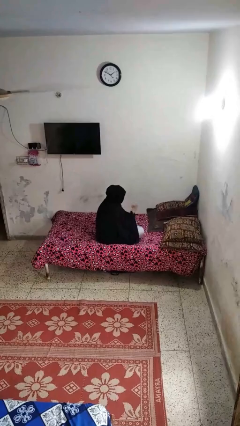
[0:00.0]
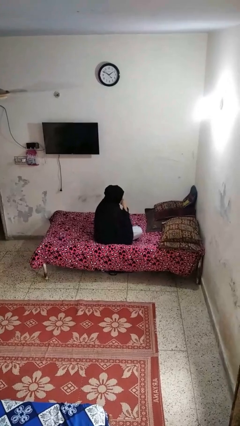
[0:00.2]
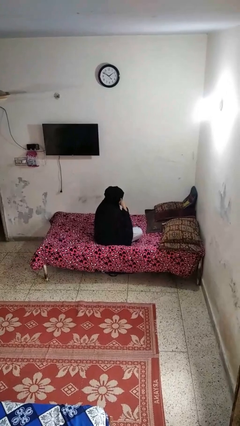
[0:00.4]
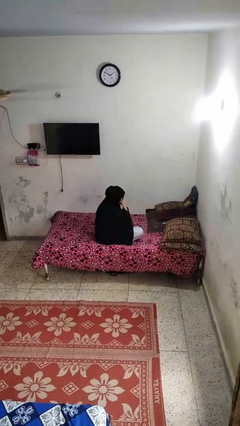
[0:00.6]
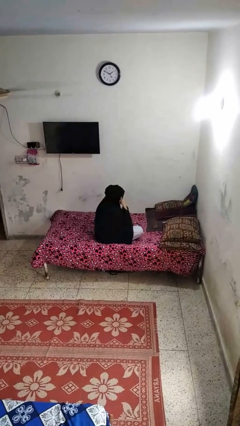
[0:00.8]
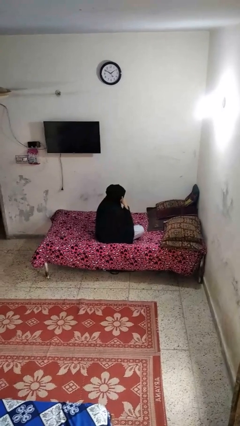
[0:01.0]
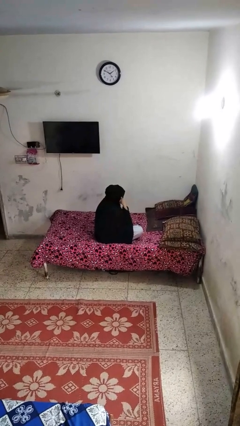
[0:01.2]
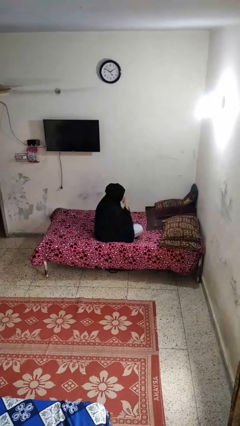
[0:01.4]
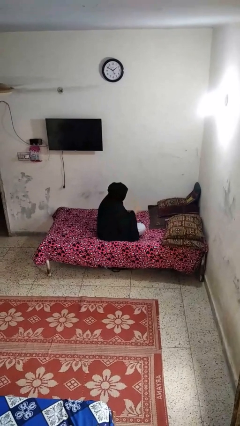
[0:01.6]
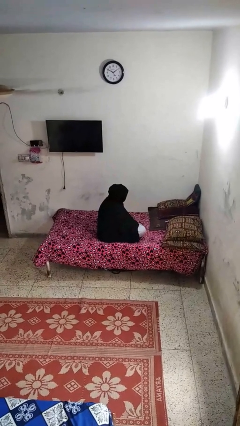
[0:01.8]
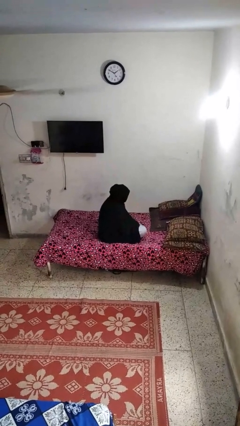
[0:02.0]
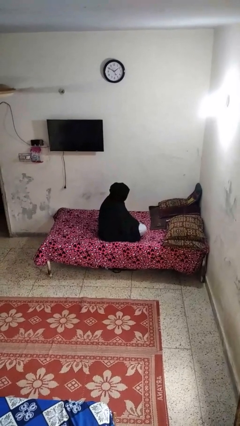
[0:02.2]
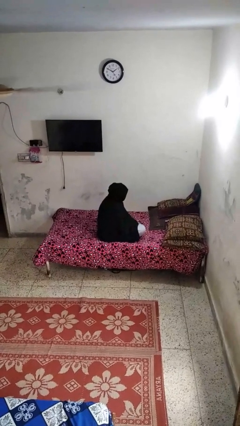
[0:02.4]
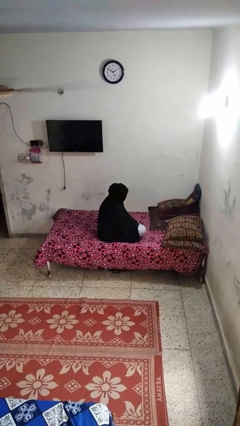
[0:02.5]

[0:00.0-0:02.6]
person gestures call me

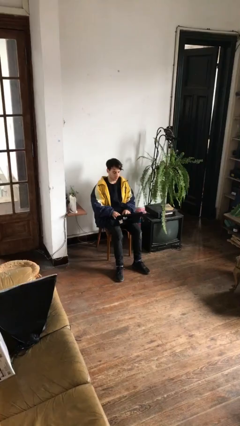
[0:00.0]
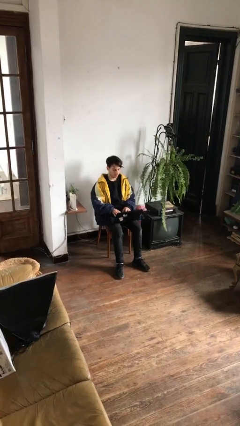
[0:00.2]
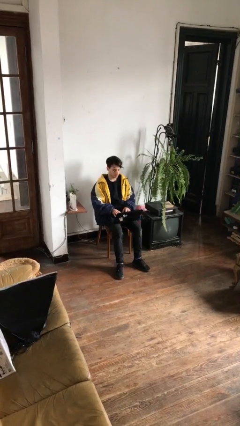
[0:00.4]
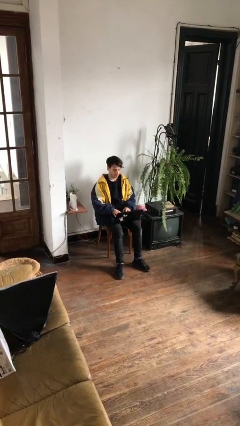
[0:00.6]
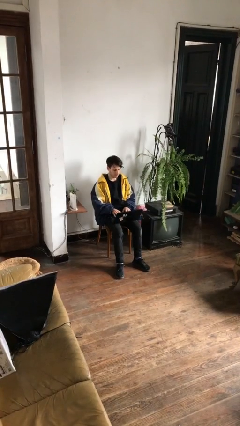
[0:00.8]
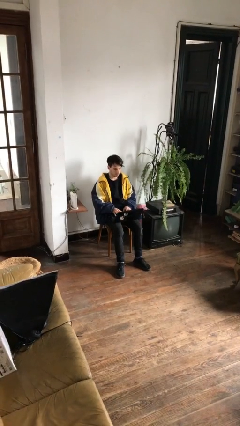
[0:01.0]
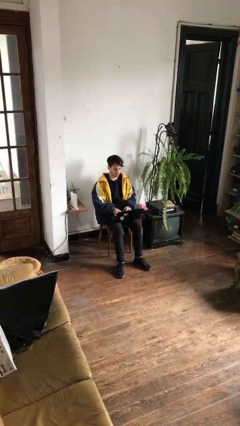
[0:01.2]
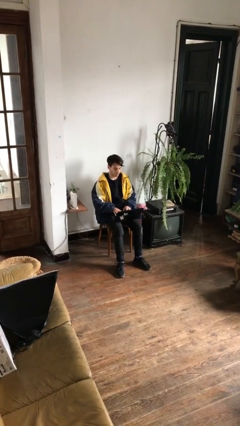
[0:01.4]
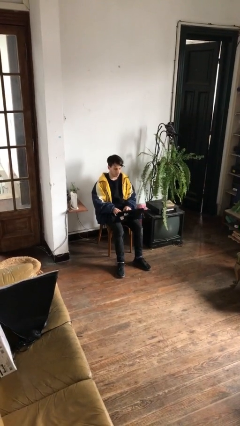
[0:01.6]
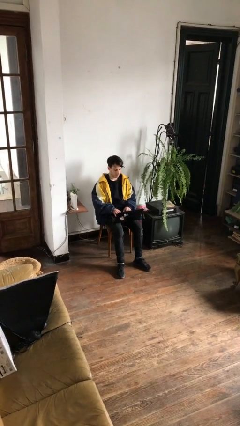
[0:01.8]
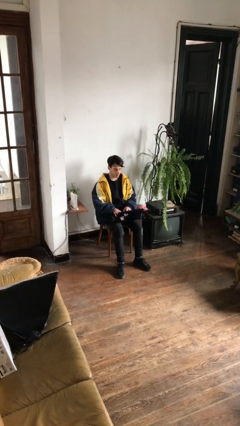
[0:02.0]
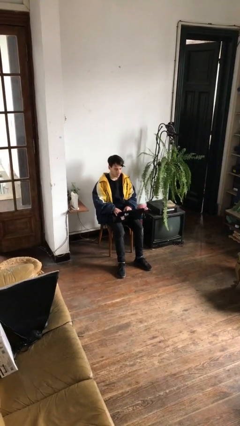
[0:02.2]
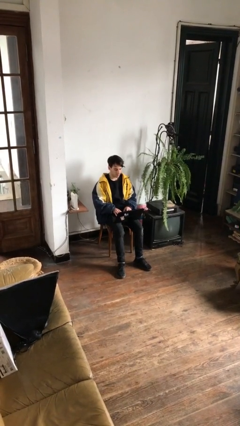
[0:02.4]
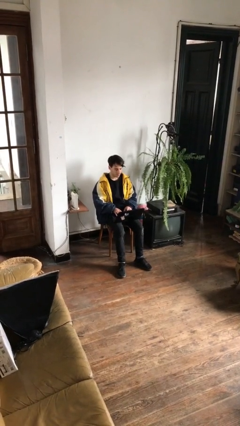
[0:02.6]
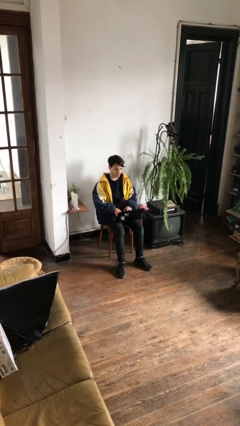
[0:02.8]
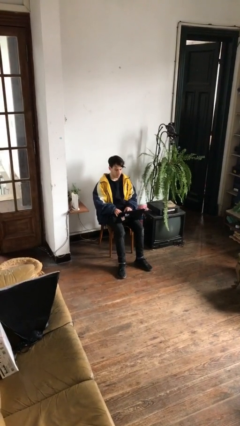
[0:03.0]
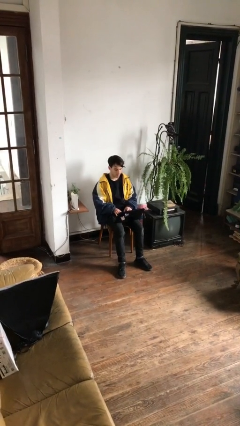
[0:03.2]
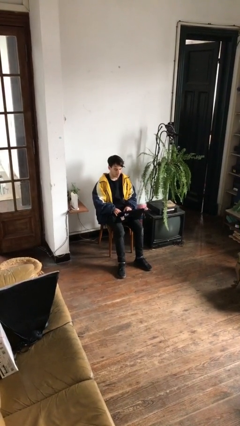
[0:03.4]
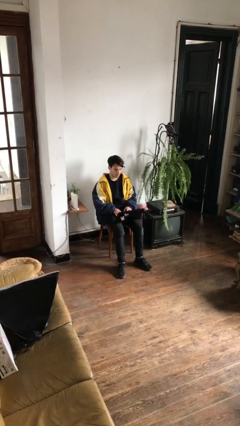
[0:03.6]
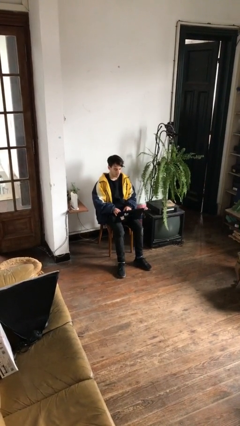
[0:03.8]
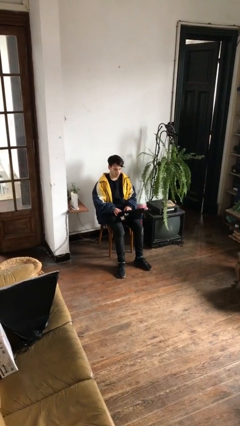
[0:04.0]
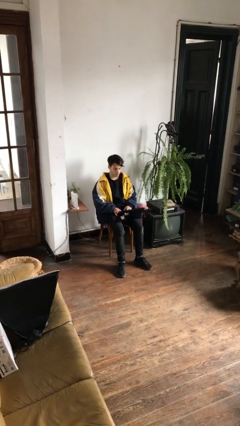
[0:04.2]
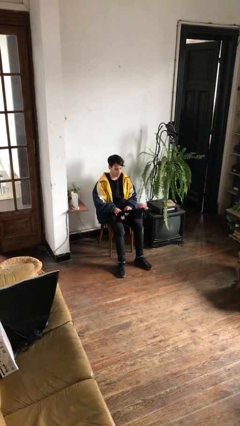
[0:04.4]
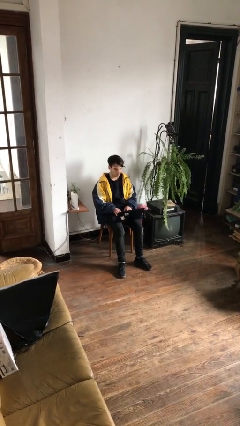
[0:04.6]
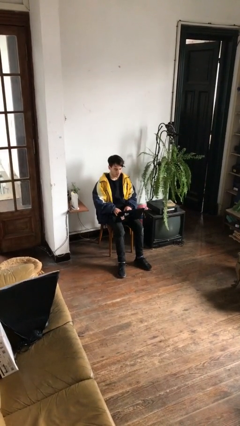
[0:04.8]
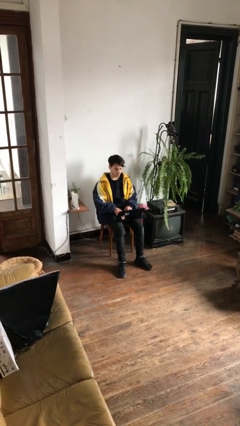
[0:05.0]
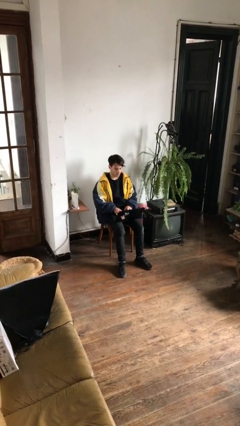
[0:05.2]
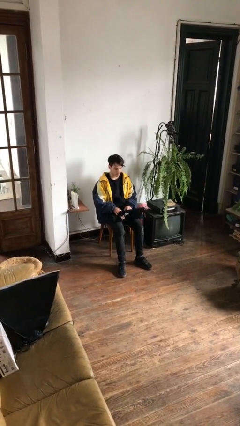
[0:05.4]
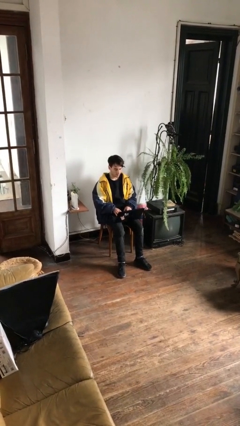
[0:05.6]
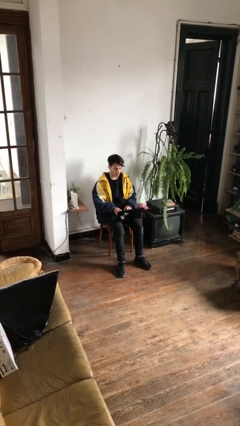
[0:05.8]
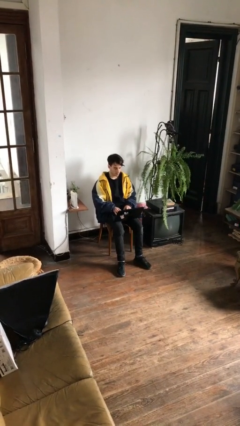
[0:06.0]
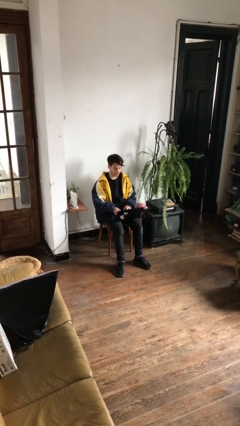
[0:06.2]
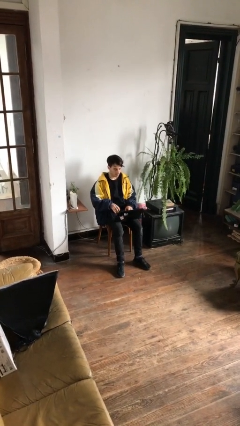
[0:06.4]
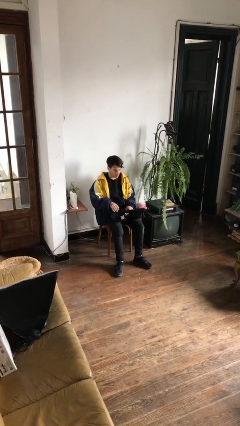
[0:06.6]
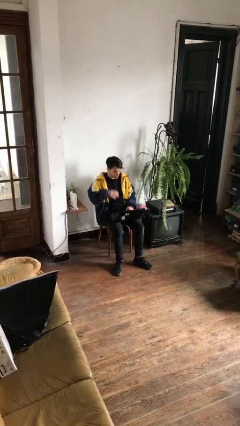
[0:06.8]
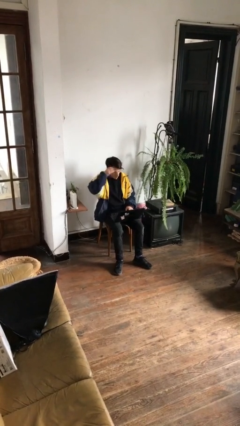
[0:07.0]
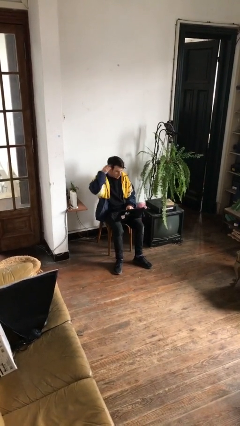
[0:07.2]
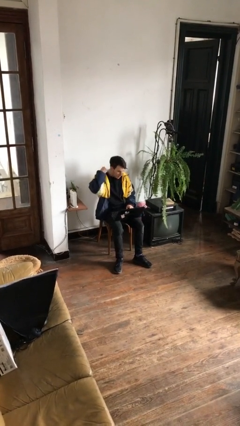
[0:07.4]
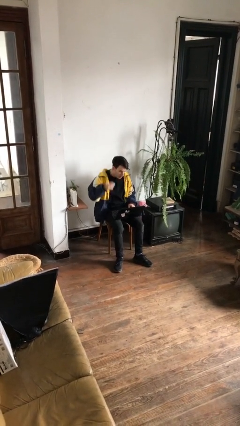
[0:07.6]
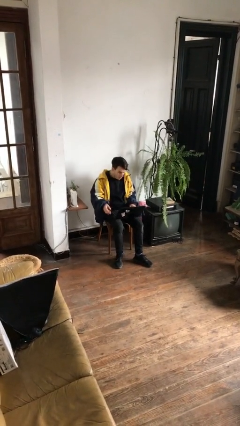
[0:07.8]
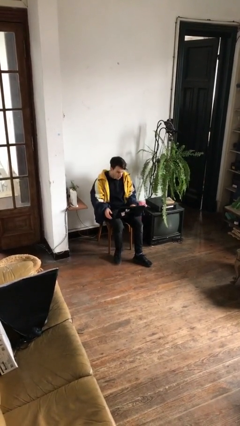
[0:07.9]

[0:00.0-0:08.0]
person interacts with laptop

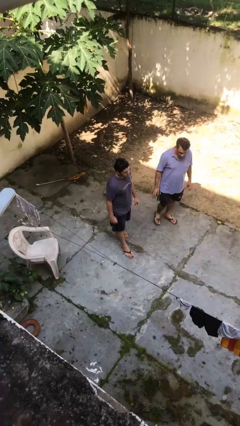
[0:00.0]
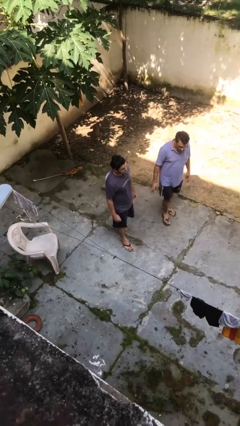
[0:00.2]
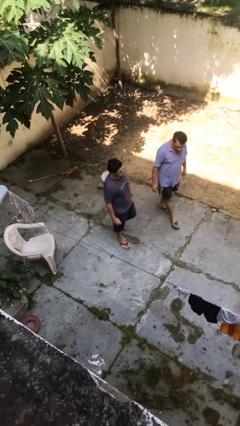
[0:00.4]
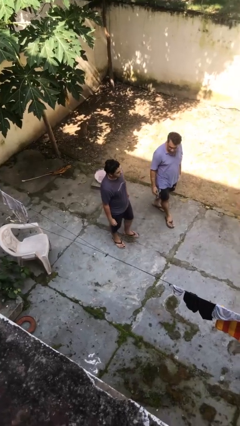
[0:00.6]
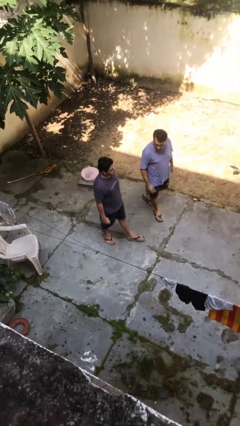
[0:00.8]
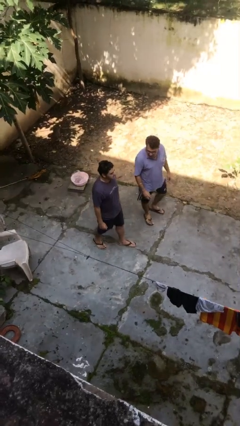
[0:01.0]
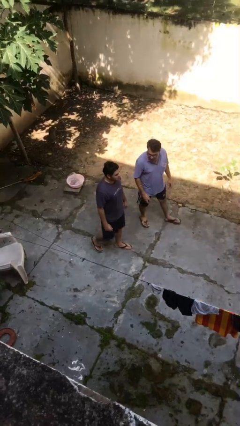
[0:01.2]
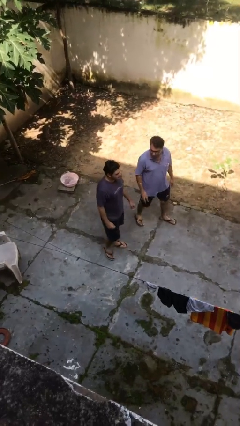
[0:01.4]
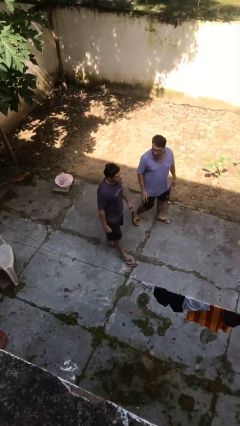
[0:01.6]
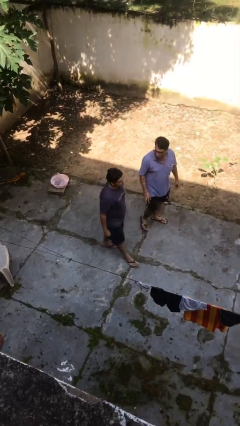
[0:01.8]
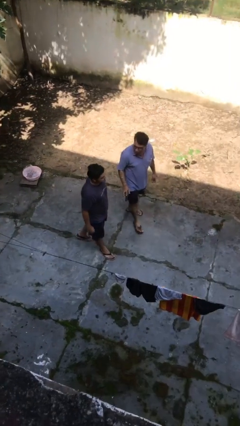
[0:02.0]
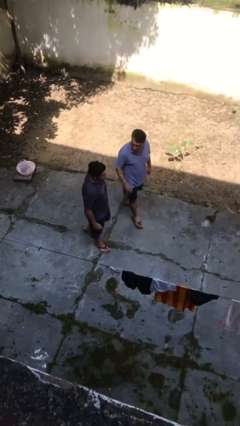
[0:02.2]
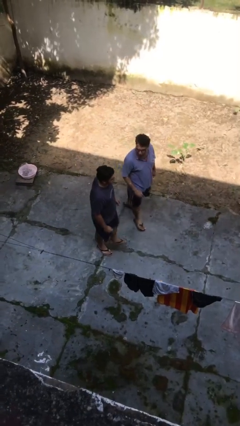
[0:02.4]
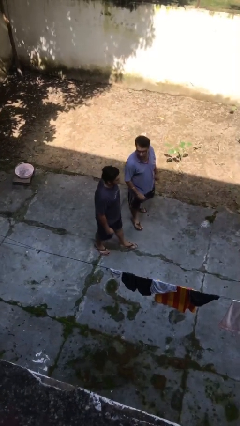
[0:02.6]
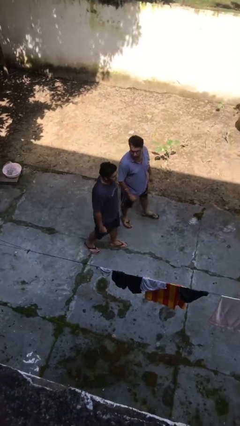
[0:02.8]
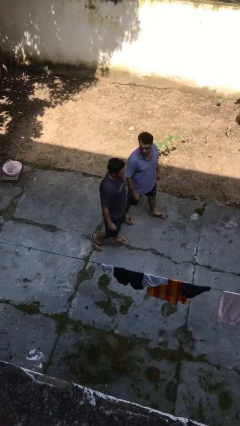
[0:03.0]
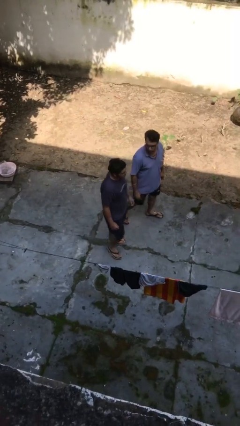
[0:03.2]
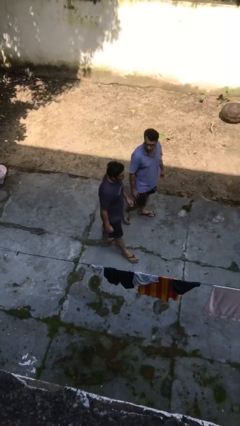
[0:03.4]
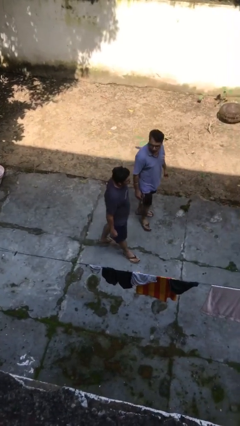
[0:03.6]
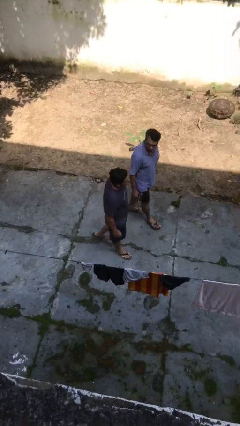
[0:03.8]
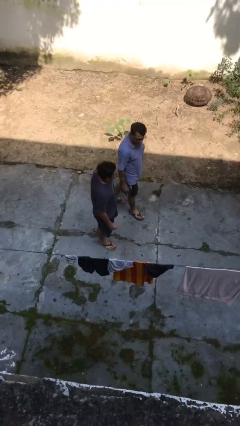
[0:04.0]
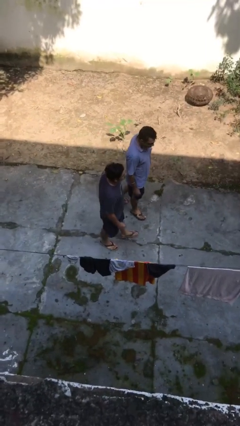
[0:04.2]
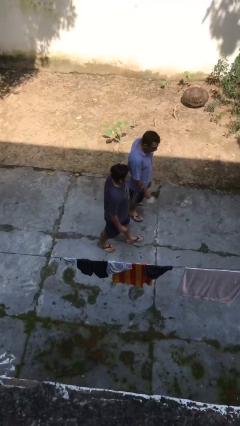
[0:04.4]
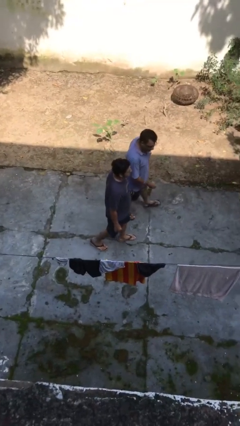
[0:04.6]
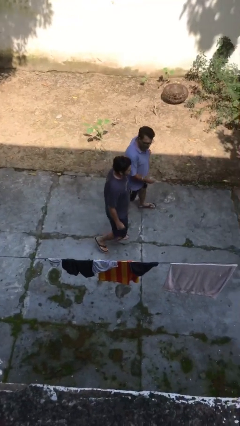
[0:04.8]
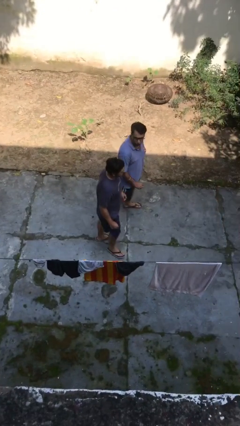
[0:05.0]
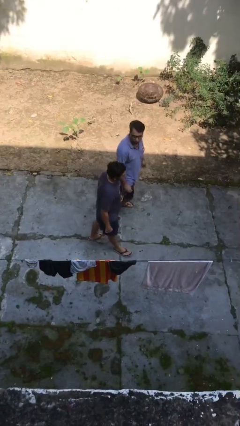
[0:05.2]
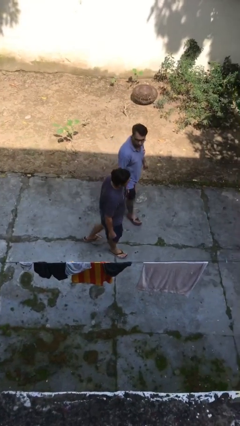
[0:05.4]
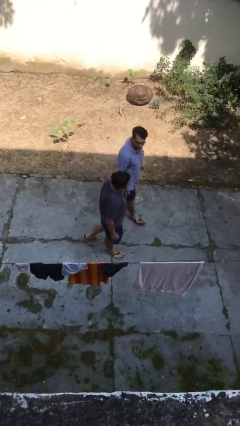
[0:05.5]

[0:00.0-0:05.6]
person talks to person

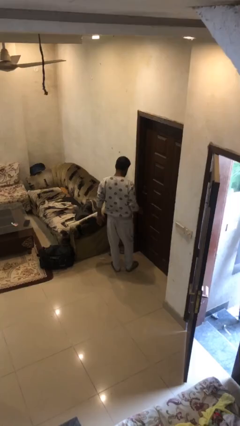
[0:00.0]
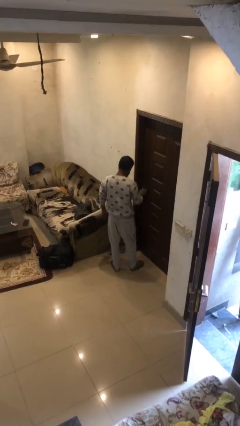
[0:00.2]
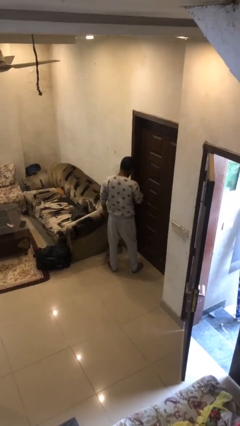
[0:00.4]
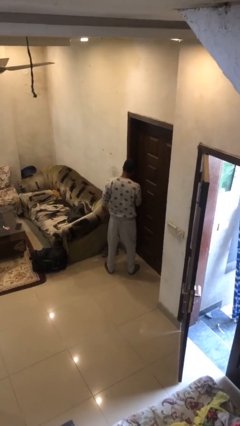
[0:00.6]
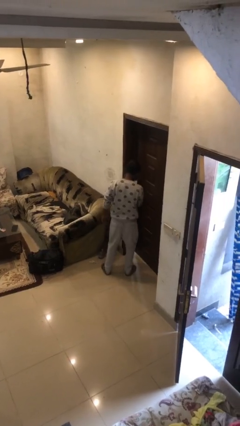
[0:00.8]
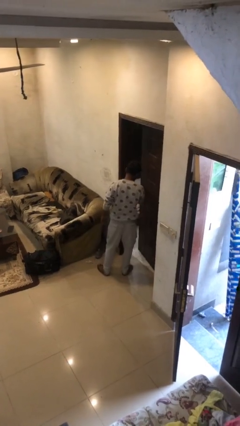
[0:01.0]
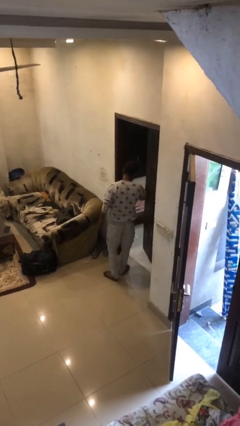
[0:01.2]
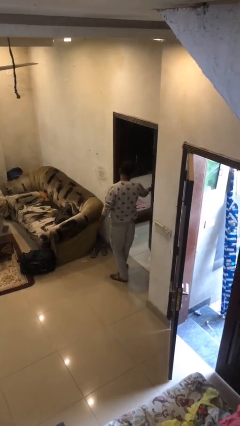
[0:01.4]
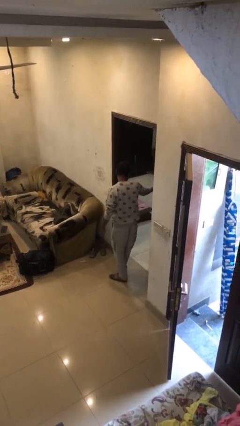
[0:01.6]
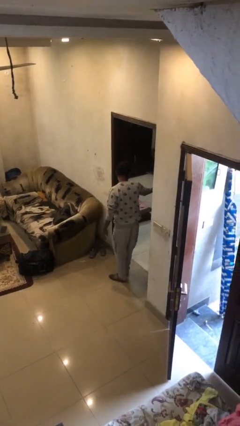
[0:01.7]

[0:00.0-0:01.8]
person opens facility door
